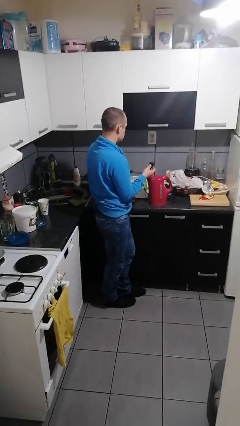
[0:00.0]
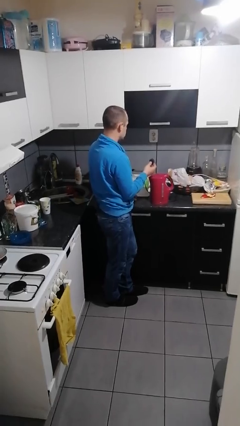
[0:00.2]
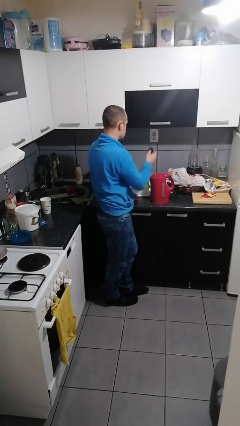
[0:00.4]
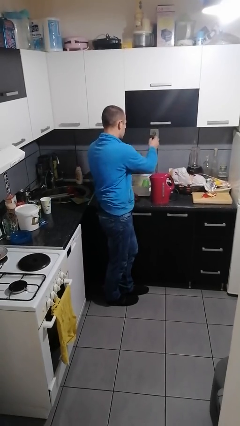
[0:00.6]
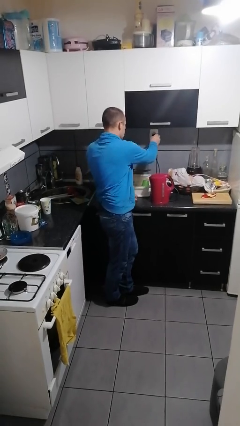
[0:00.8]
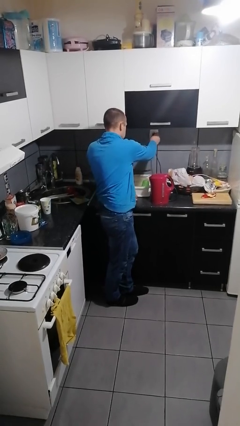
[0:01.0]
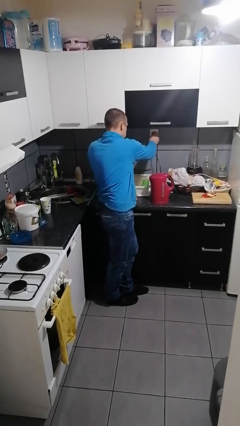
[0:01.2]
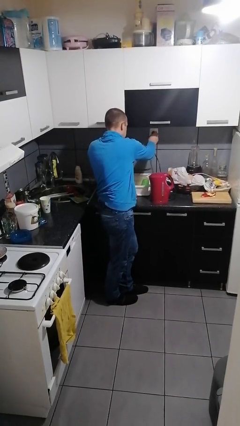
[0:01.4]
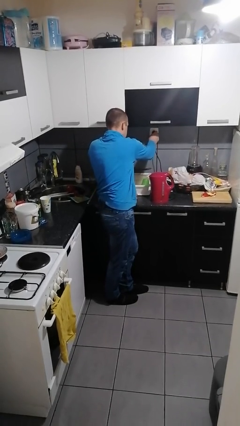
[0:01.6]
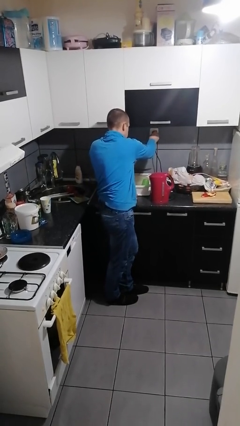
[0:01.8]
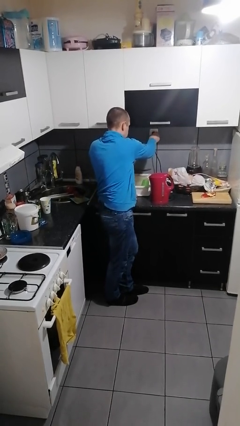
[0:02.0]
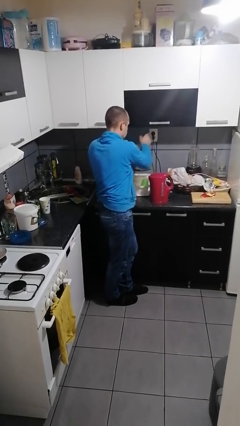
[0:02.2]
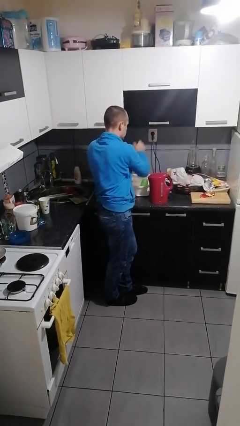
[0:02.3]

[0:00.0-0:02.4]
person plugs into electrical socket

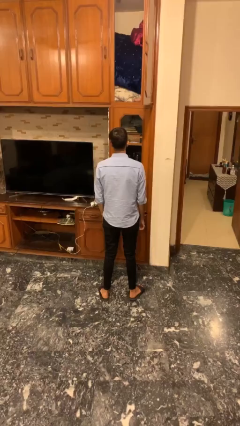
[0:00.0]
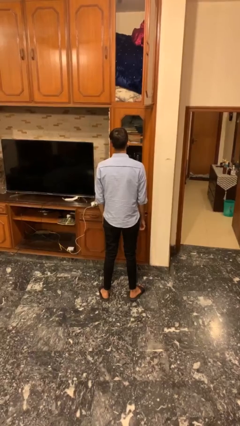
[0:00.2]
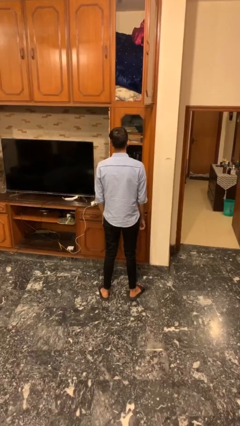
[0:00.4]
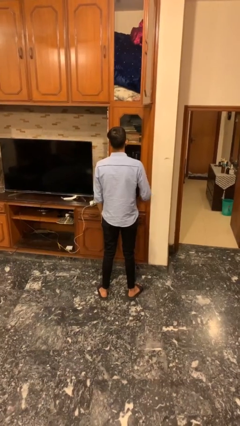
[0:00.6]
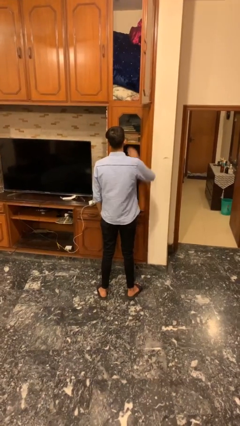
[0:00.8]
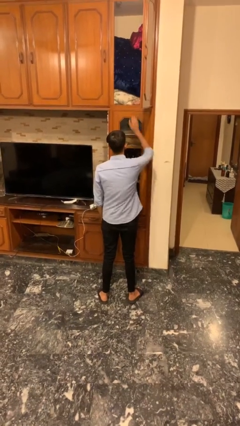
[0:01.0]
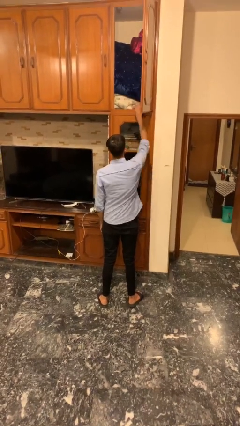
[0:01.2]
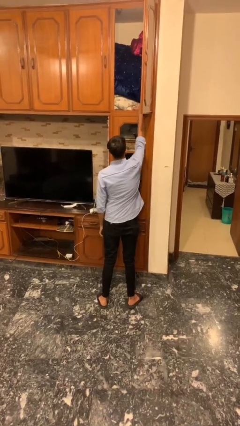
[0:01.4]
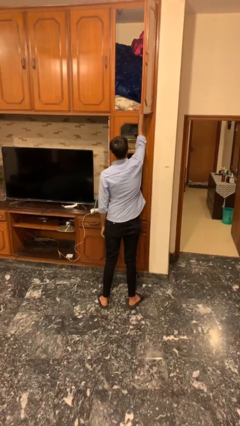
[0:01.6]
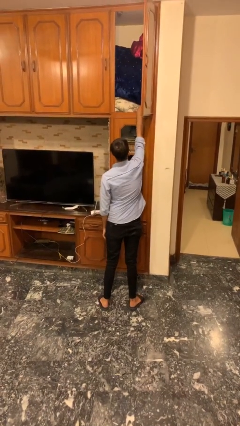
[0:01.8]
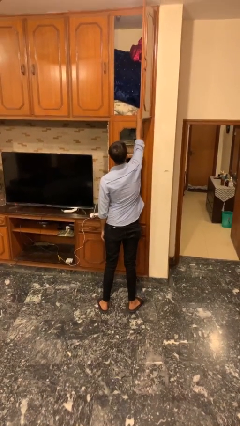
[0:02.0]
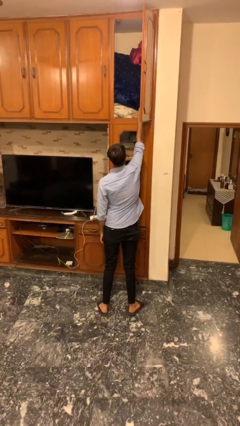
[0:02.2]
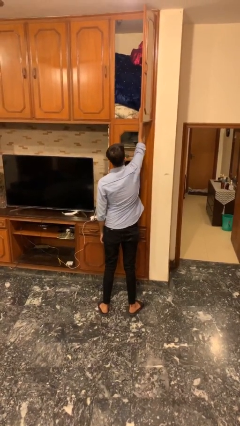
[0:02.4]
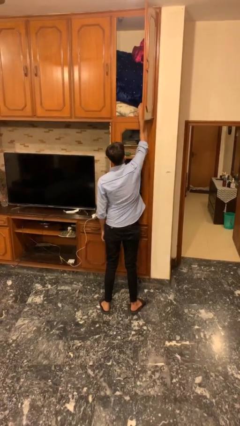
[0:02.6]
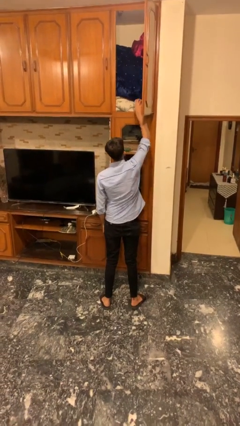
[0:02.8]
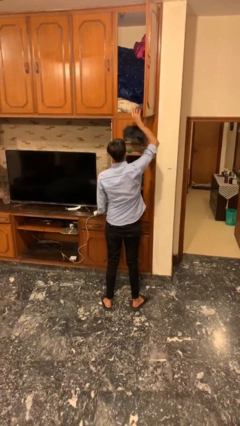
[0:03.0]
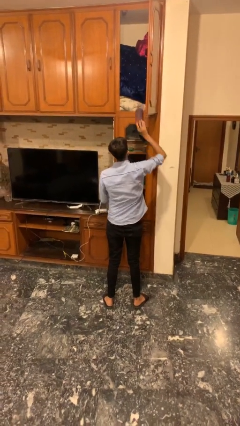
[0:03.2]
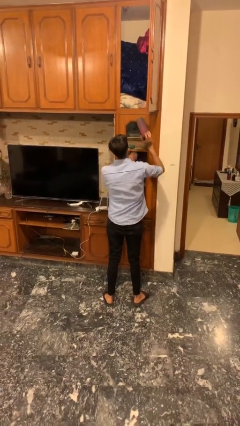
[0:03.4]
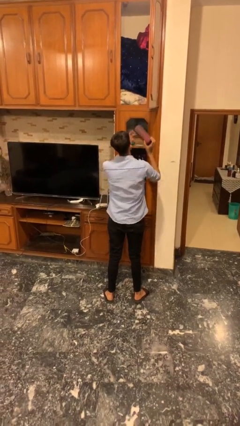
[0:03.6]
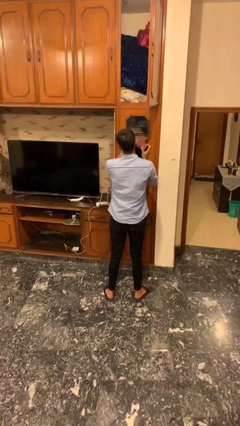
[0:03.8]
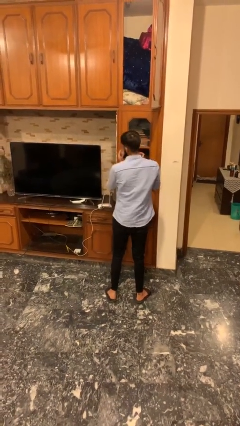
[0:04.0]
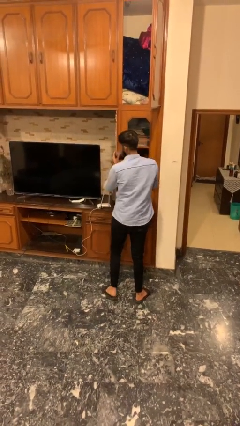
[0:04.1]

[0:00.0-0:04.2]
person picks up object from shelf

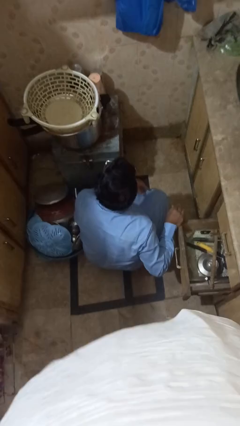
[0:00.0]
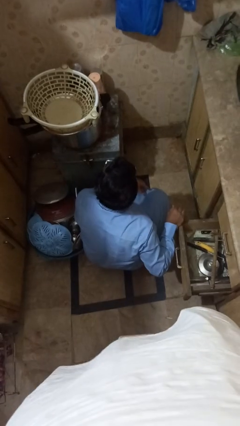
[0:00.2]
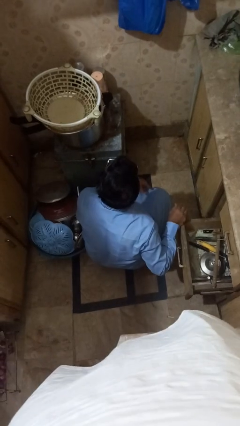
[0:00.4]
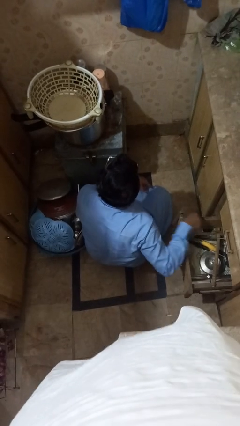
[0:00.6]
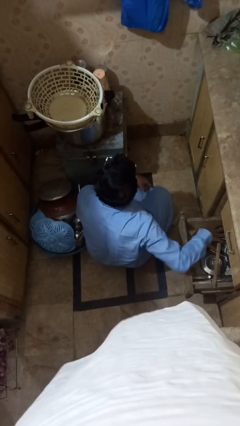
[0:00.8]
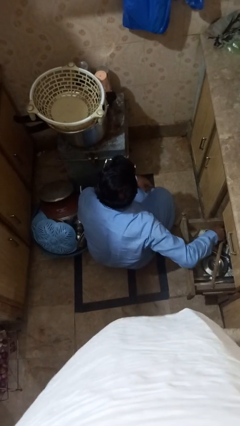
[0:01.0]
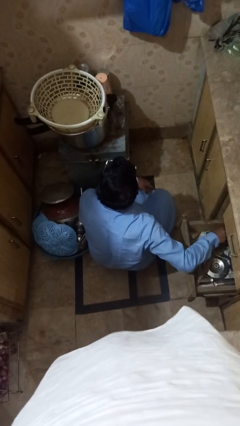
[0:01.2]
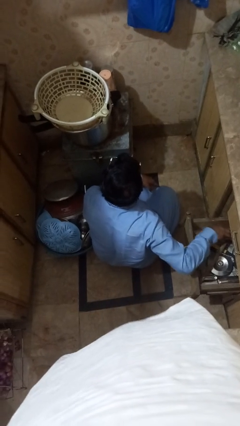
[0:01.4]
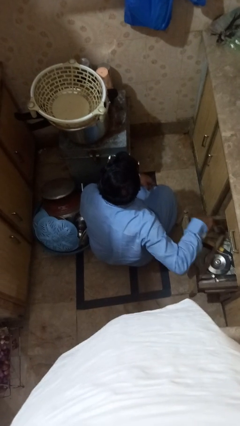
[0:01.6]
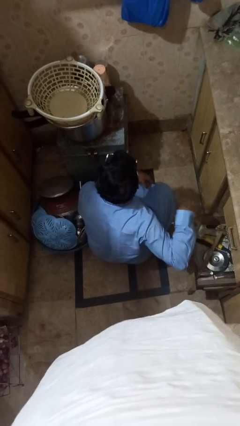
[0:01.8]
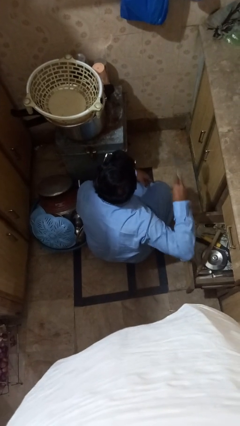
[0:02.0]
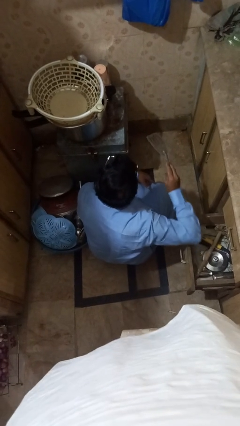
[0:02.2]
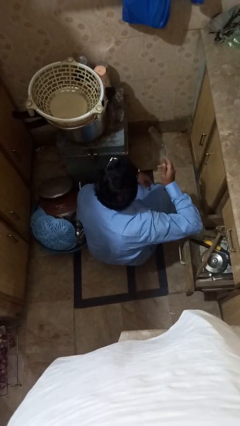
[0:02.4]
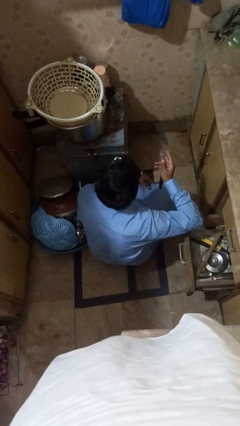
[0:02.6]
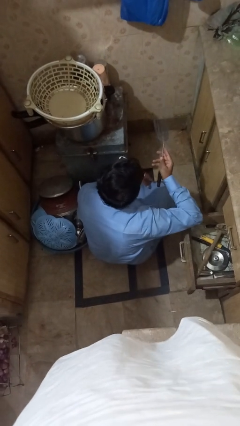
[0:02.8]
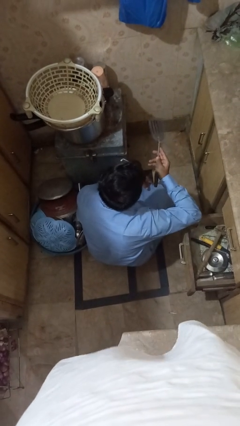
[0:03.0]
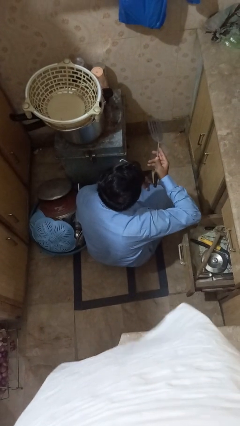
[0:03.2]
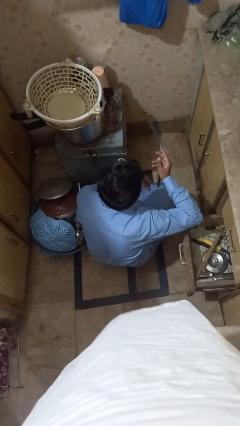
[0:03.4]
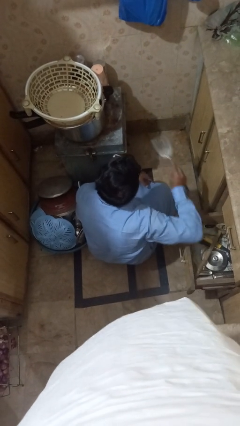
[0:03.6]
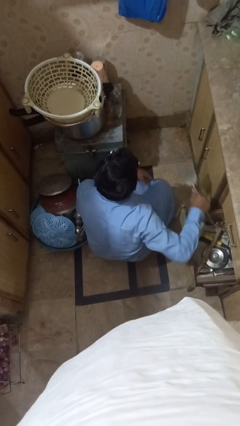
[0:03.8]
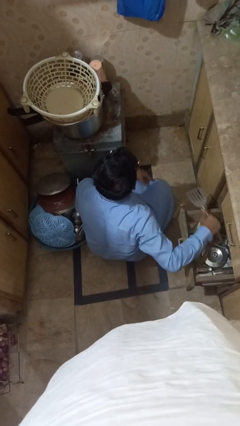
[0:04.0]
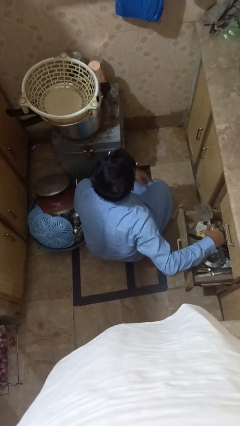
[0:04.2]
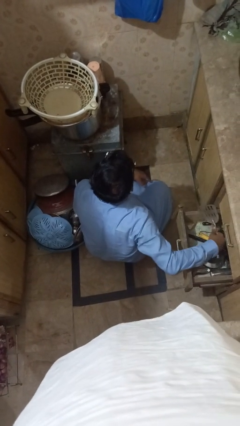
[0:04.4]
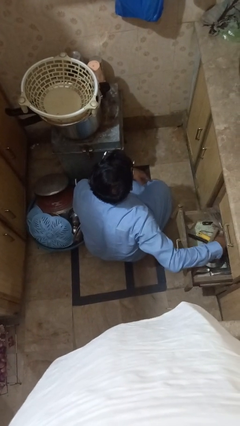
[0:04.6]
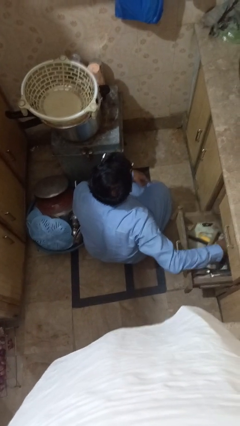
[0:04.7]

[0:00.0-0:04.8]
person searches in kitchen drawer

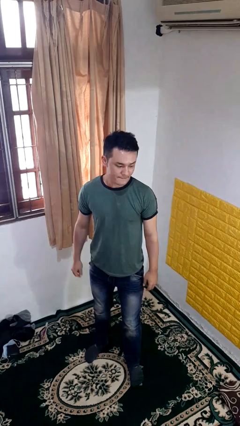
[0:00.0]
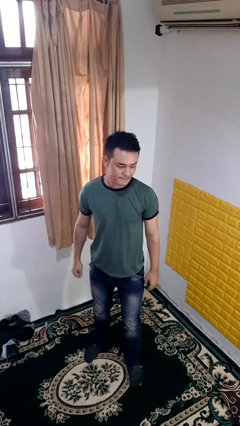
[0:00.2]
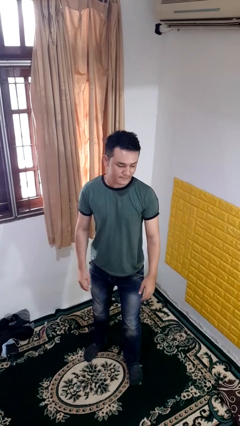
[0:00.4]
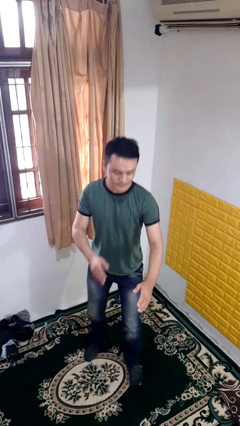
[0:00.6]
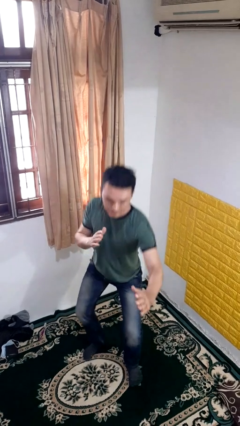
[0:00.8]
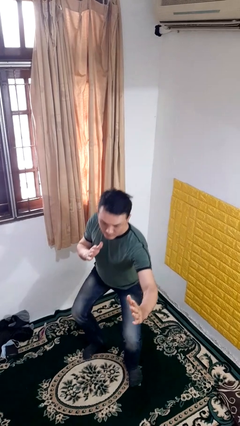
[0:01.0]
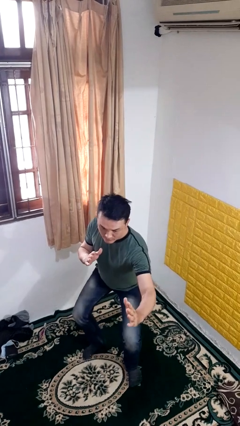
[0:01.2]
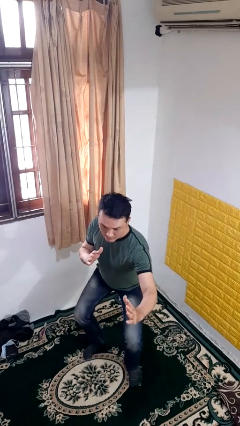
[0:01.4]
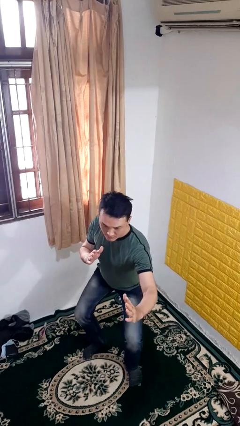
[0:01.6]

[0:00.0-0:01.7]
person karate chop

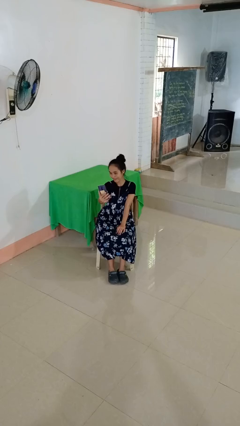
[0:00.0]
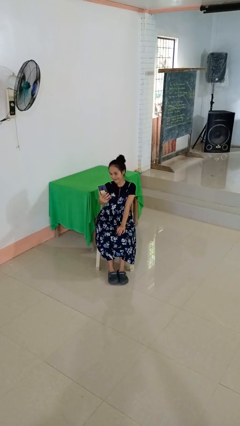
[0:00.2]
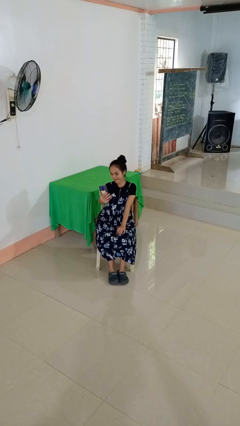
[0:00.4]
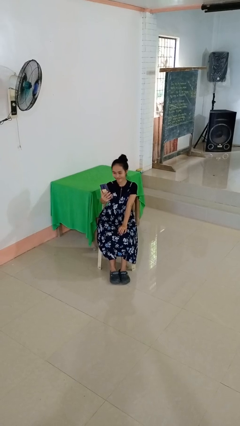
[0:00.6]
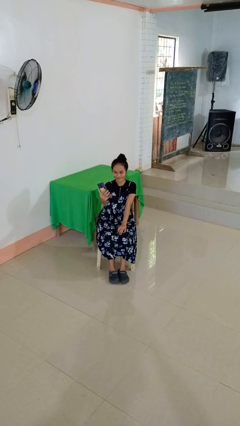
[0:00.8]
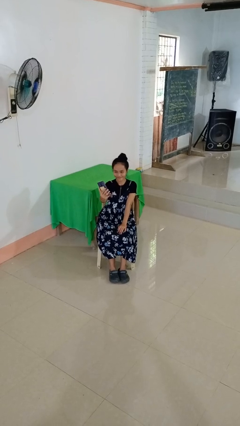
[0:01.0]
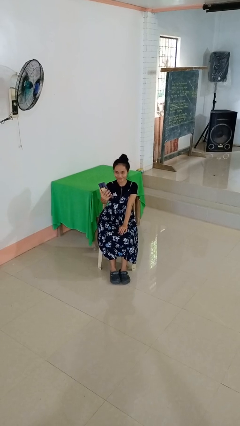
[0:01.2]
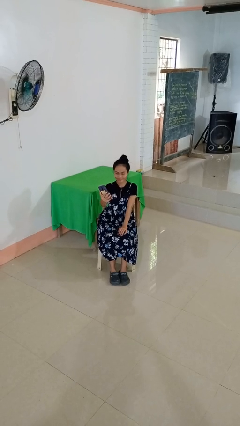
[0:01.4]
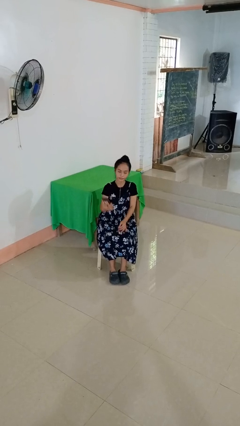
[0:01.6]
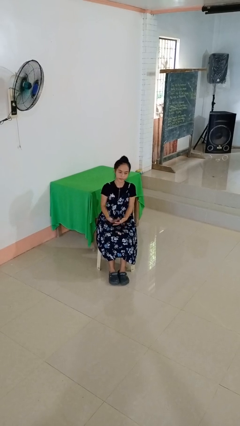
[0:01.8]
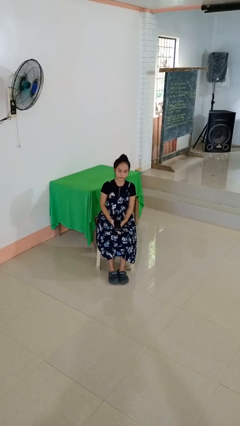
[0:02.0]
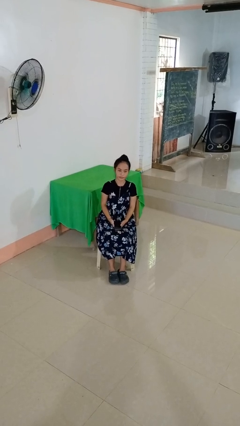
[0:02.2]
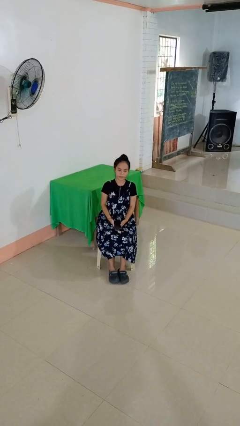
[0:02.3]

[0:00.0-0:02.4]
person takes selfie

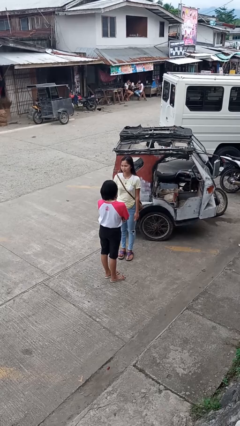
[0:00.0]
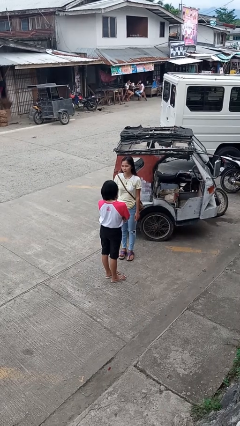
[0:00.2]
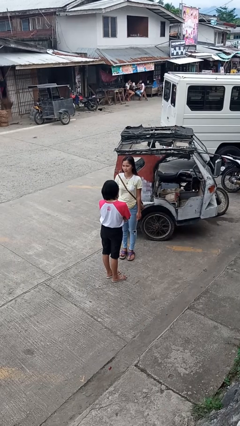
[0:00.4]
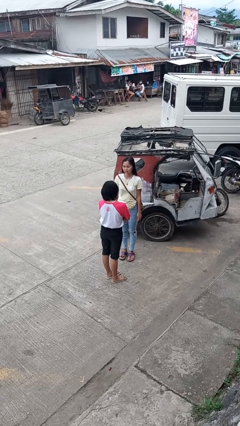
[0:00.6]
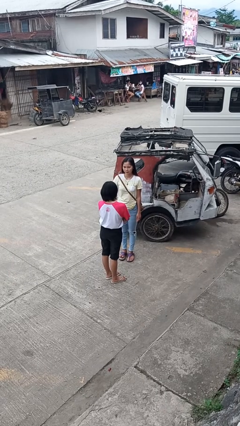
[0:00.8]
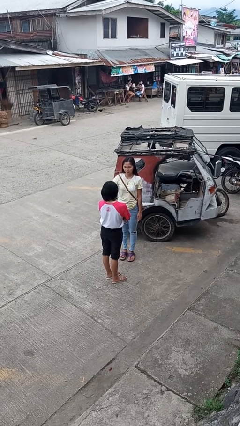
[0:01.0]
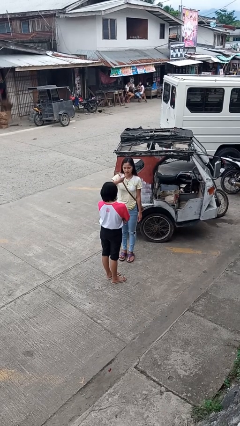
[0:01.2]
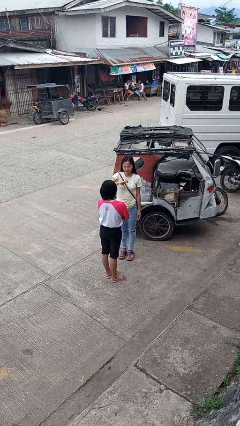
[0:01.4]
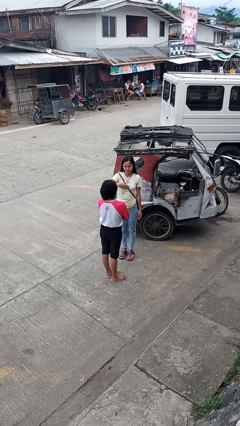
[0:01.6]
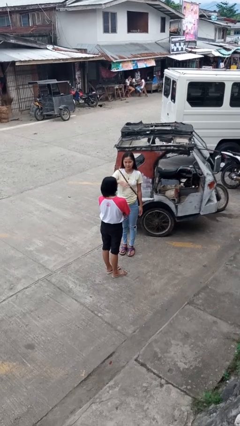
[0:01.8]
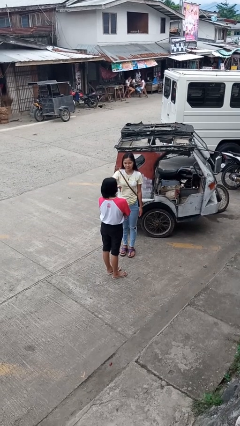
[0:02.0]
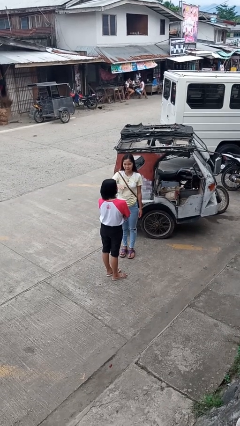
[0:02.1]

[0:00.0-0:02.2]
person shoves person
